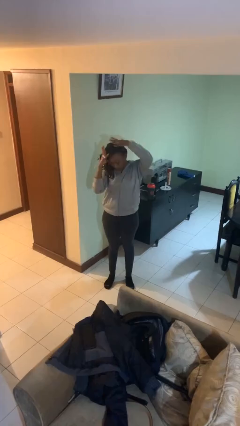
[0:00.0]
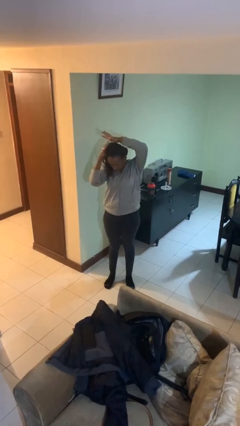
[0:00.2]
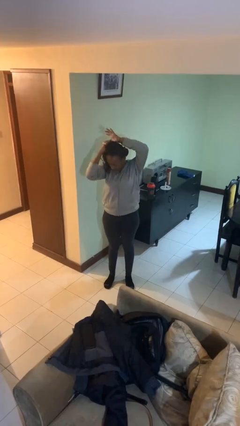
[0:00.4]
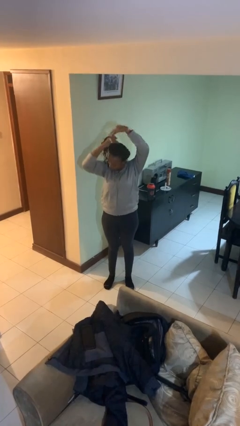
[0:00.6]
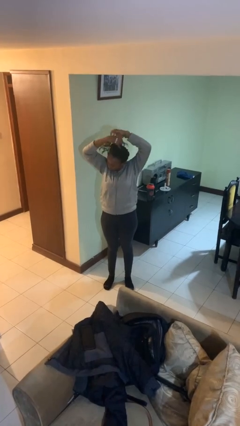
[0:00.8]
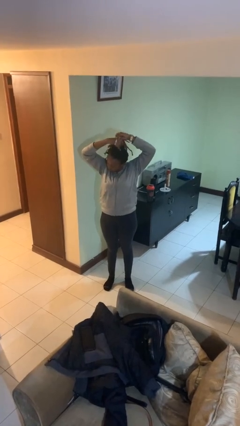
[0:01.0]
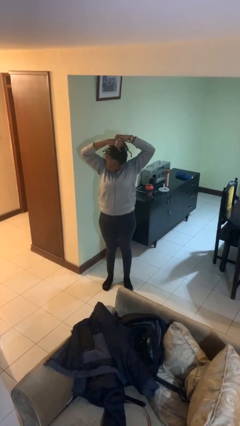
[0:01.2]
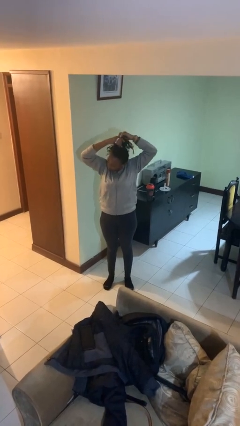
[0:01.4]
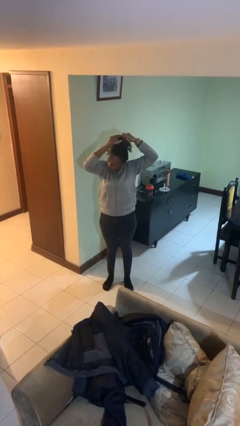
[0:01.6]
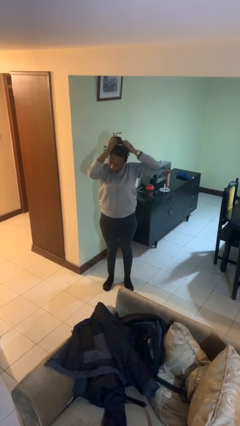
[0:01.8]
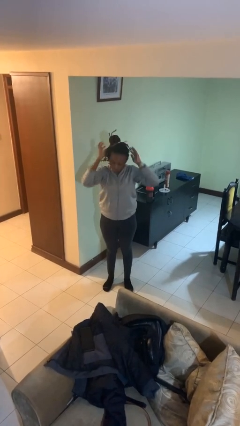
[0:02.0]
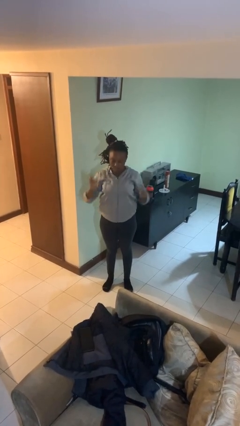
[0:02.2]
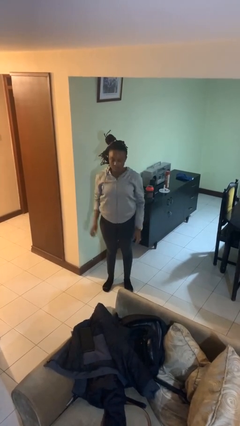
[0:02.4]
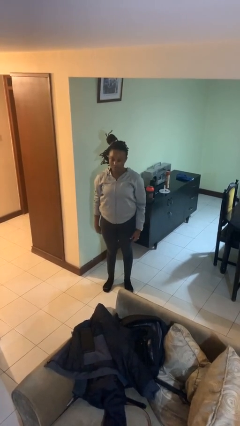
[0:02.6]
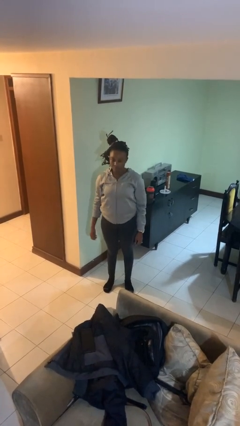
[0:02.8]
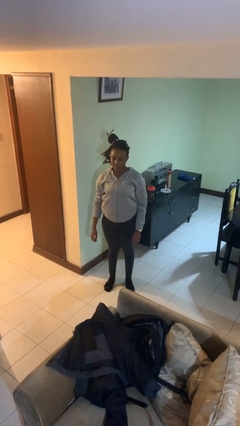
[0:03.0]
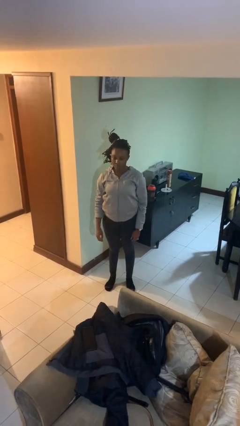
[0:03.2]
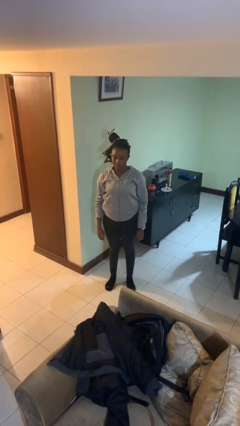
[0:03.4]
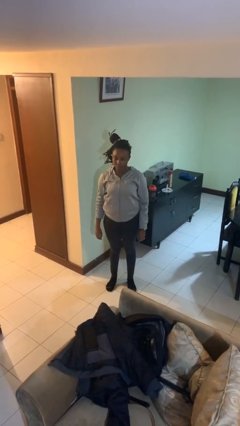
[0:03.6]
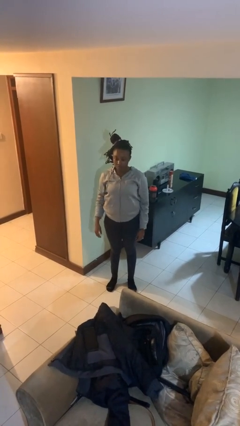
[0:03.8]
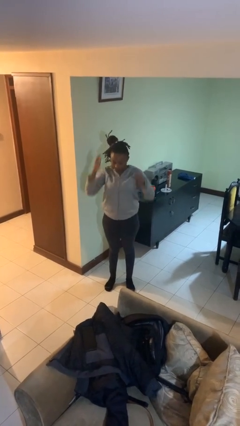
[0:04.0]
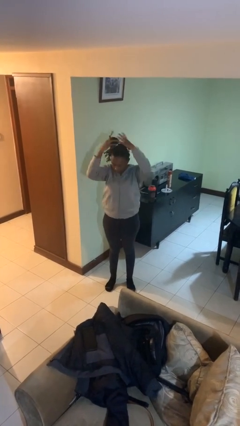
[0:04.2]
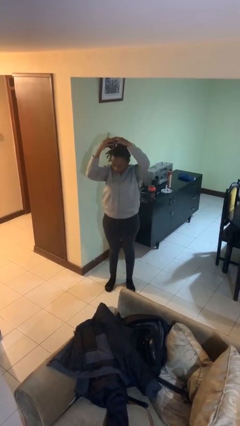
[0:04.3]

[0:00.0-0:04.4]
person puts hair in ponytail

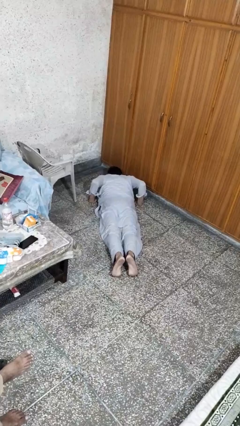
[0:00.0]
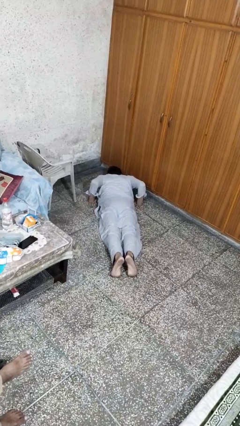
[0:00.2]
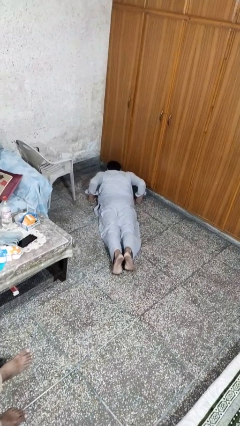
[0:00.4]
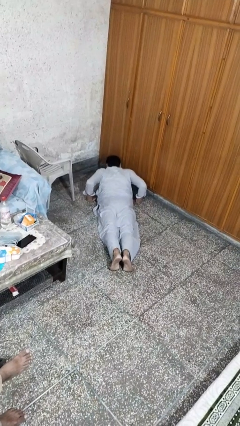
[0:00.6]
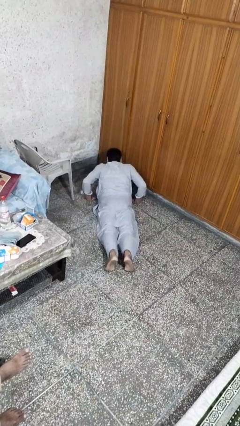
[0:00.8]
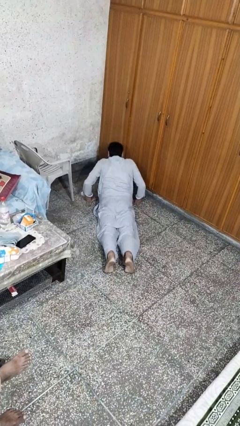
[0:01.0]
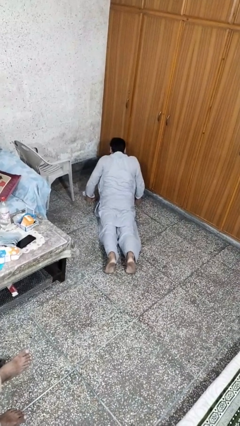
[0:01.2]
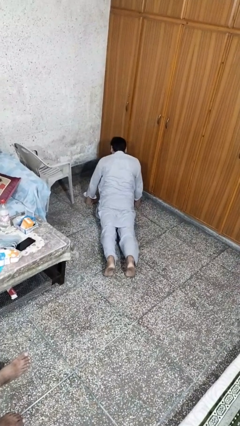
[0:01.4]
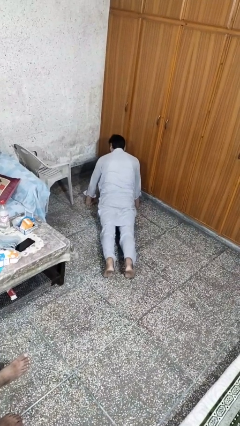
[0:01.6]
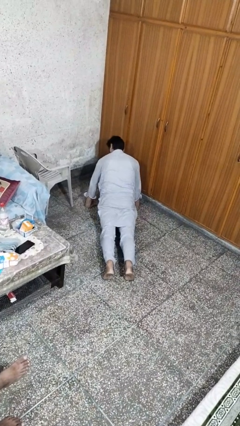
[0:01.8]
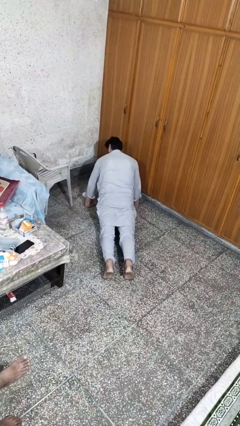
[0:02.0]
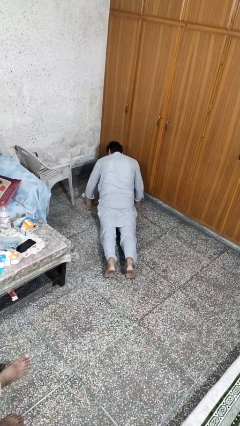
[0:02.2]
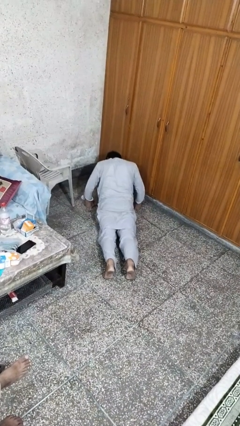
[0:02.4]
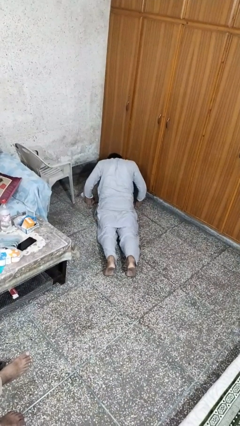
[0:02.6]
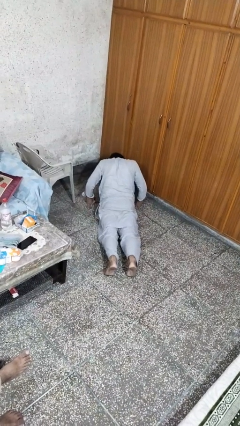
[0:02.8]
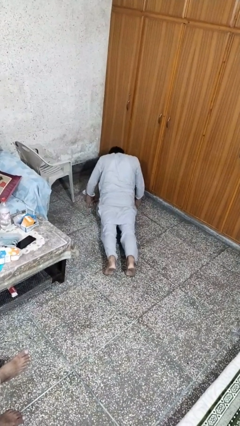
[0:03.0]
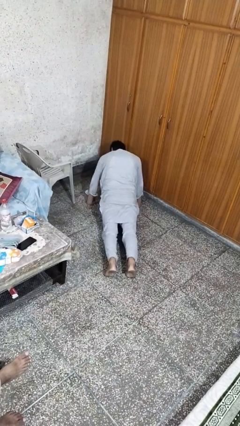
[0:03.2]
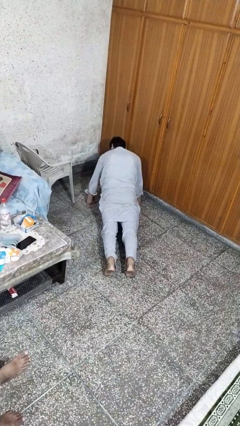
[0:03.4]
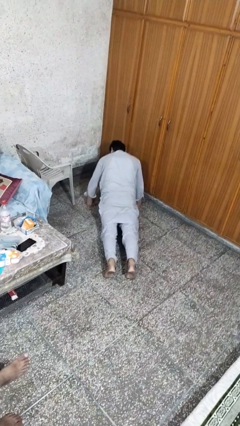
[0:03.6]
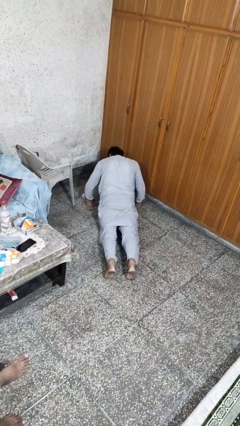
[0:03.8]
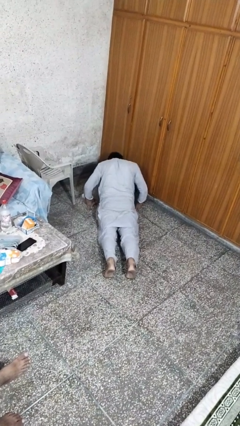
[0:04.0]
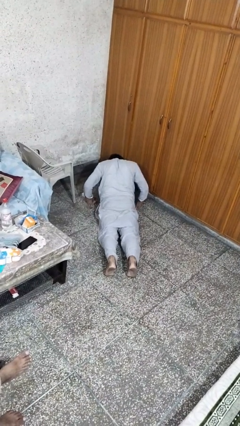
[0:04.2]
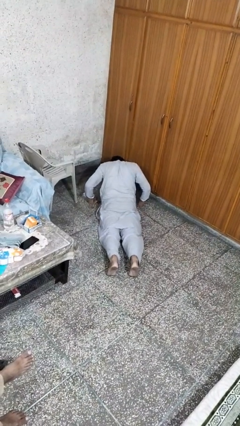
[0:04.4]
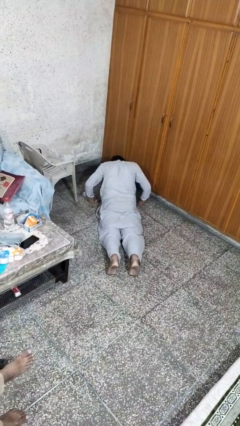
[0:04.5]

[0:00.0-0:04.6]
person exercises with pushup

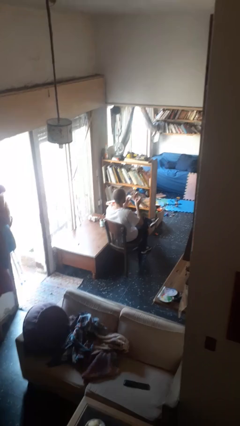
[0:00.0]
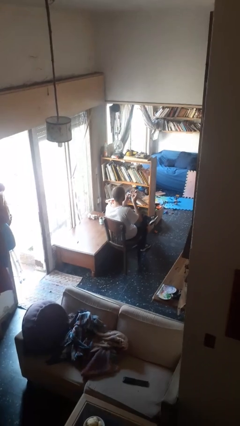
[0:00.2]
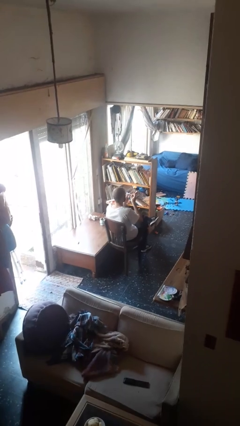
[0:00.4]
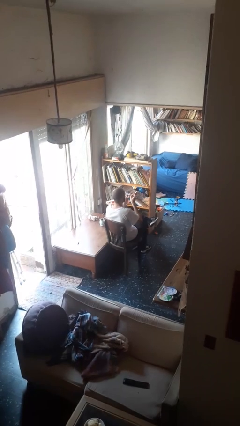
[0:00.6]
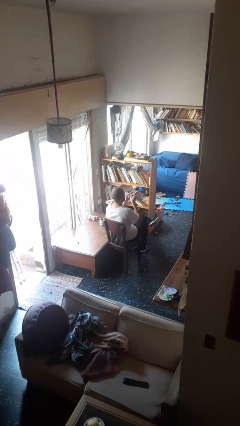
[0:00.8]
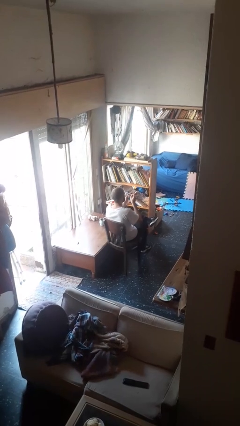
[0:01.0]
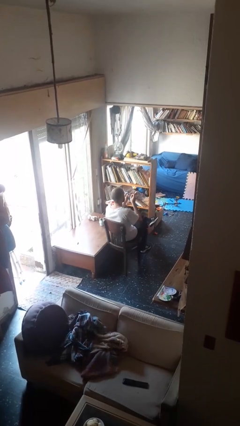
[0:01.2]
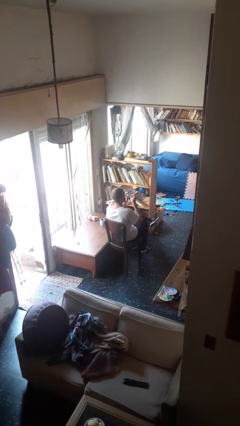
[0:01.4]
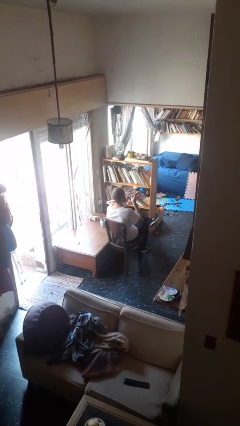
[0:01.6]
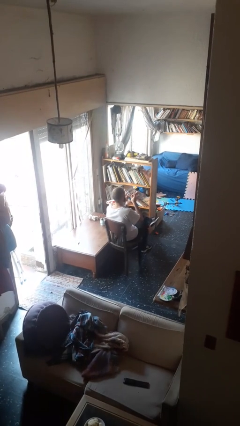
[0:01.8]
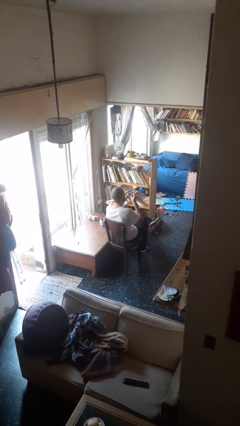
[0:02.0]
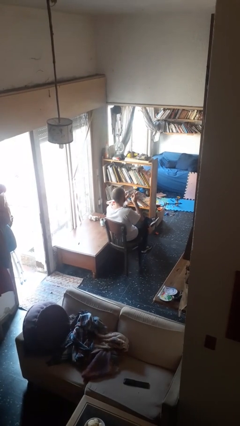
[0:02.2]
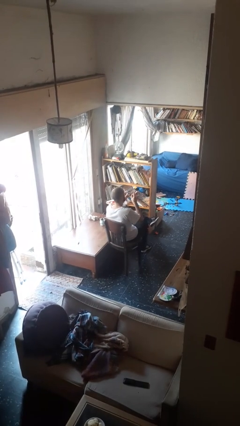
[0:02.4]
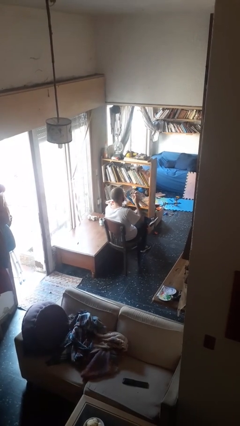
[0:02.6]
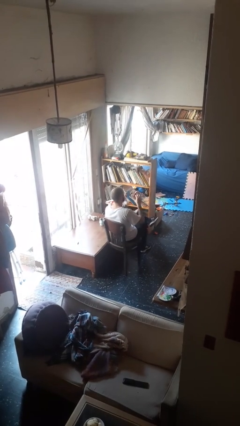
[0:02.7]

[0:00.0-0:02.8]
person clips fingernails

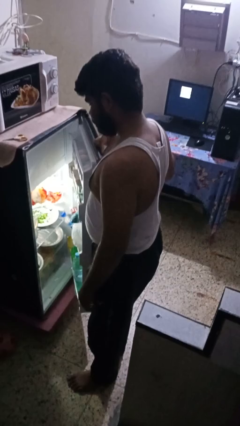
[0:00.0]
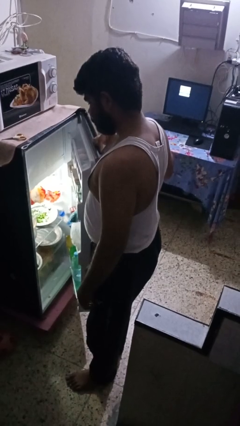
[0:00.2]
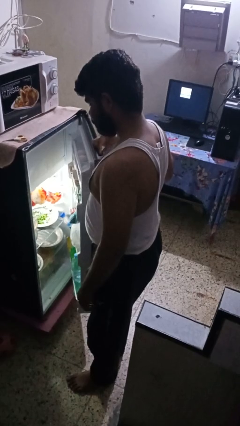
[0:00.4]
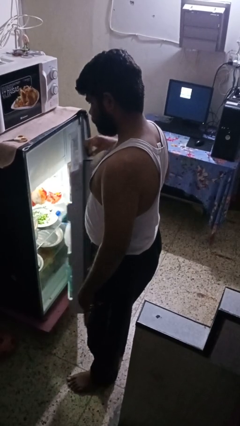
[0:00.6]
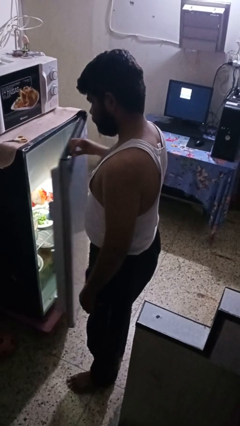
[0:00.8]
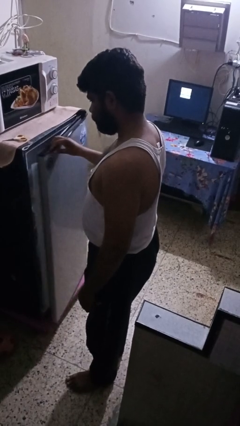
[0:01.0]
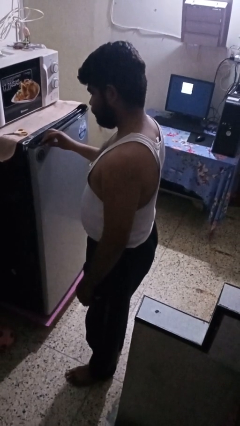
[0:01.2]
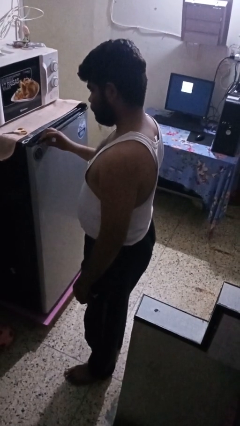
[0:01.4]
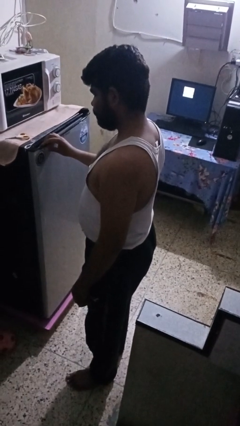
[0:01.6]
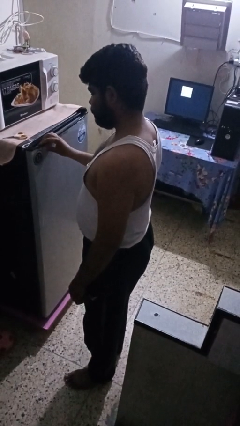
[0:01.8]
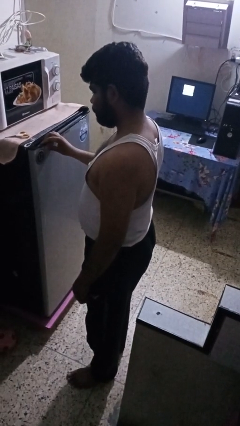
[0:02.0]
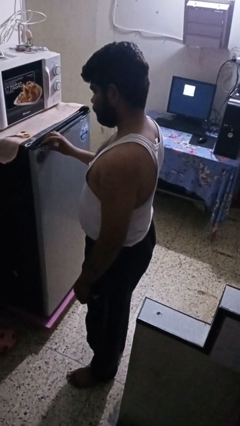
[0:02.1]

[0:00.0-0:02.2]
person closes refrigerator

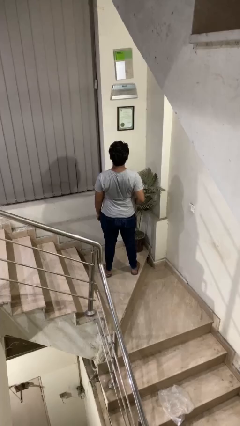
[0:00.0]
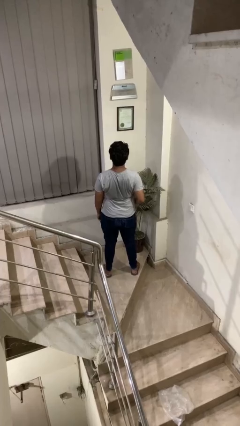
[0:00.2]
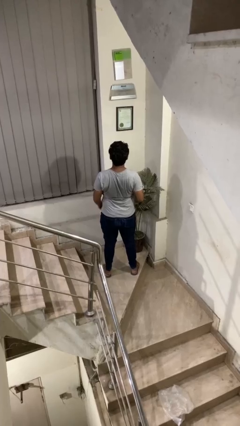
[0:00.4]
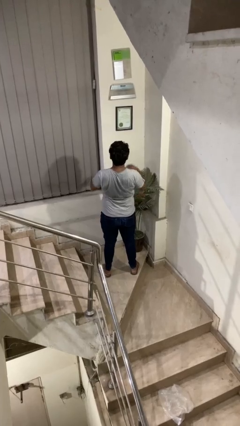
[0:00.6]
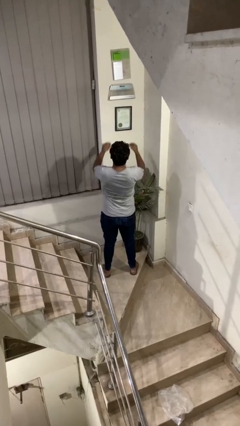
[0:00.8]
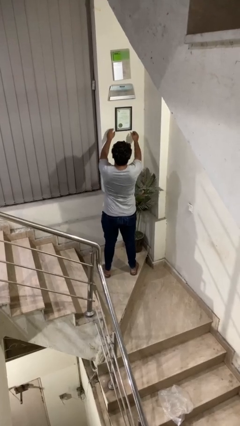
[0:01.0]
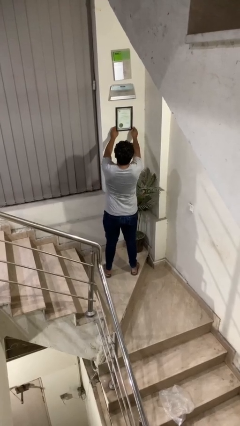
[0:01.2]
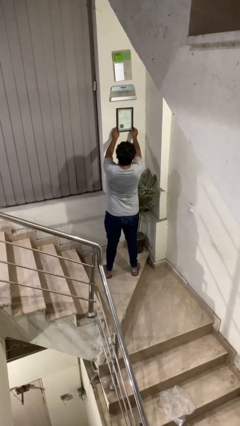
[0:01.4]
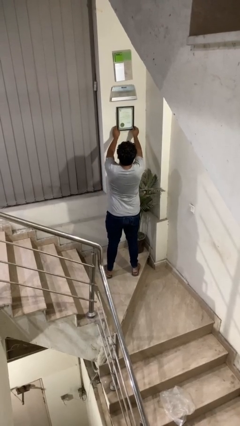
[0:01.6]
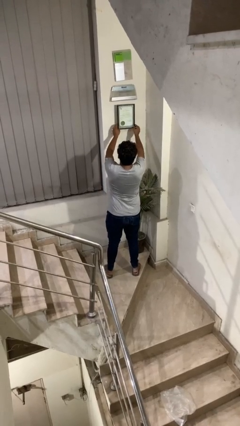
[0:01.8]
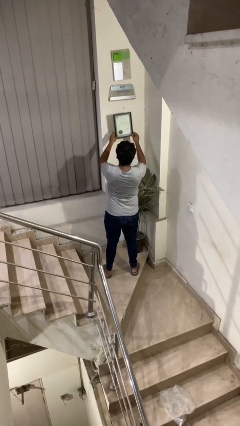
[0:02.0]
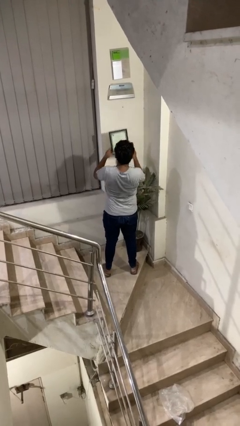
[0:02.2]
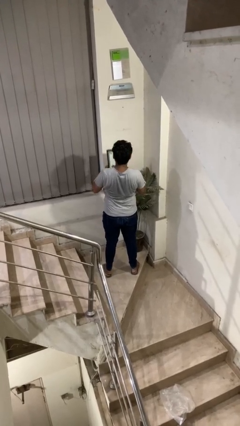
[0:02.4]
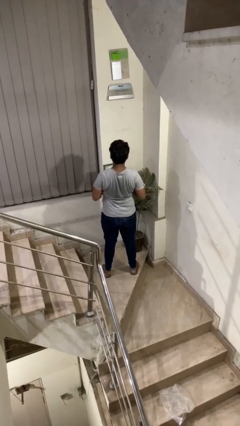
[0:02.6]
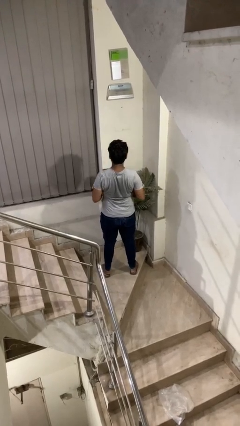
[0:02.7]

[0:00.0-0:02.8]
person takes down picture frame

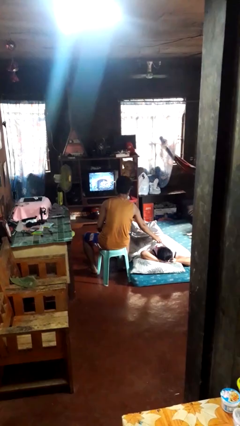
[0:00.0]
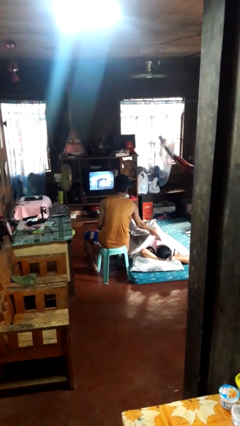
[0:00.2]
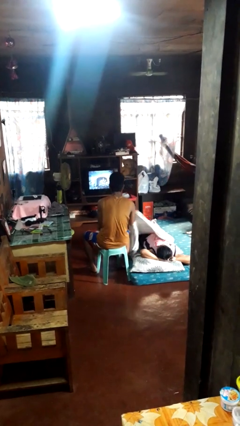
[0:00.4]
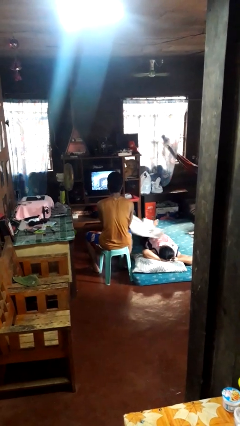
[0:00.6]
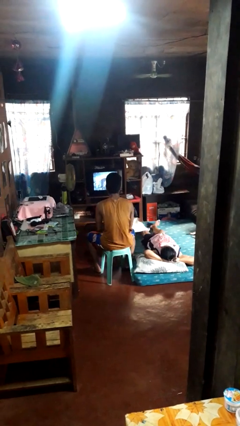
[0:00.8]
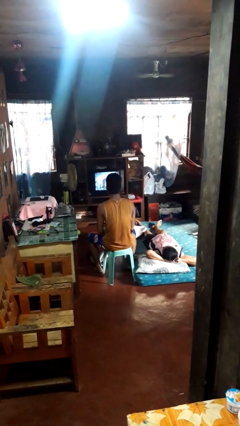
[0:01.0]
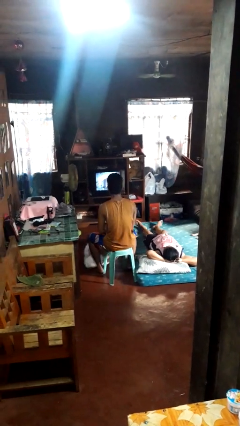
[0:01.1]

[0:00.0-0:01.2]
person uncovers friend with blanket
